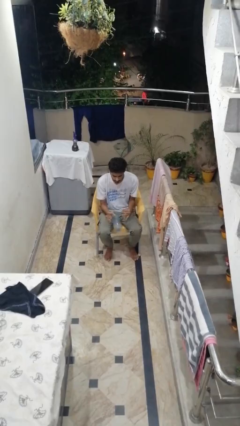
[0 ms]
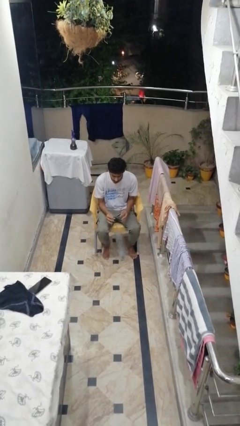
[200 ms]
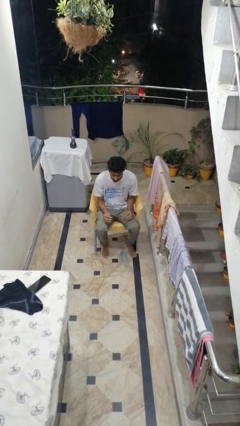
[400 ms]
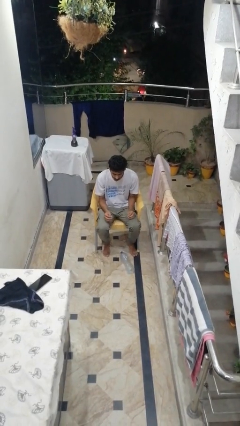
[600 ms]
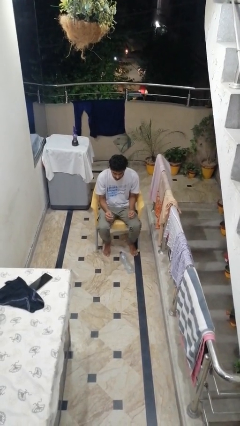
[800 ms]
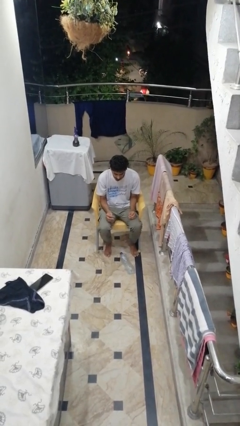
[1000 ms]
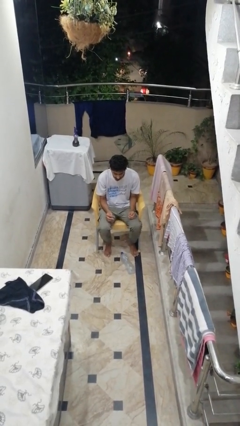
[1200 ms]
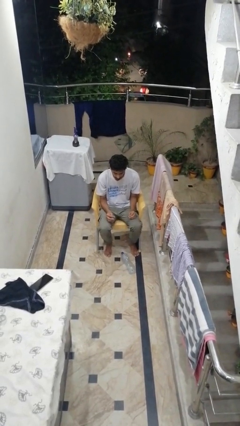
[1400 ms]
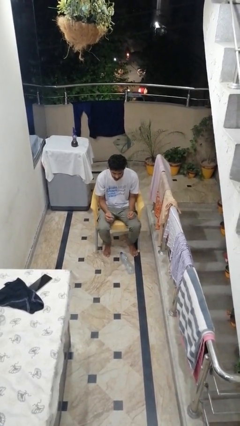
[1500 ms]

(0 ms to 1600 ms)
person drops object

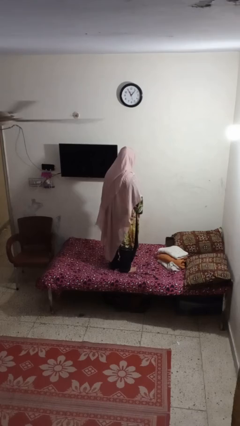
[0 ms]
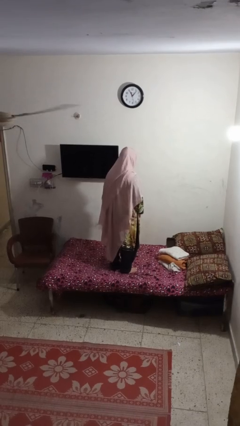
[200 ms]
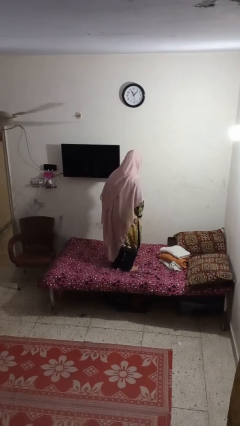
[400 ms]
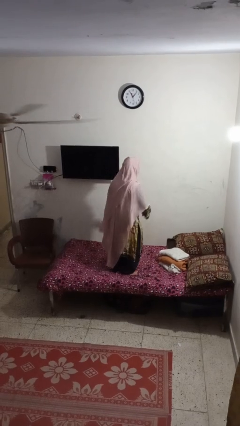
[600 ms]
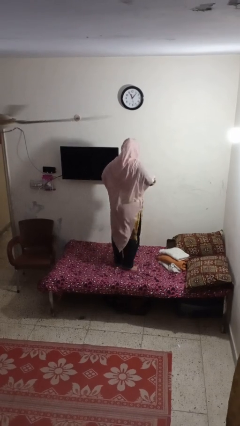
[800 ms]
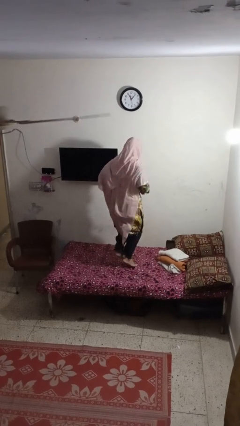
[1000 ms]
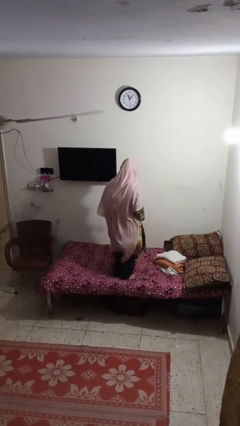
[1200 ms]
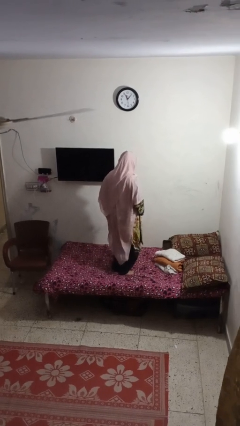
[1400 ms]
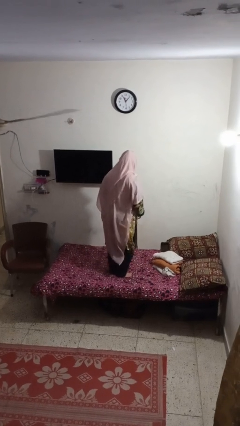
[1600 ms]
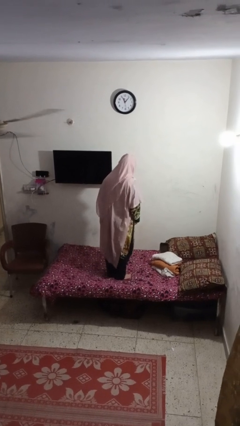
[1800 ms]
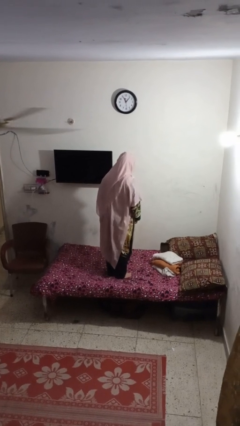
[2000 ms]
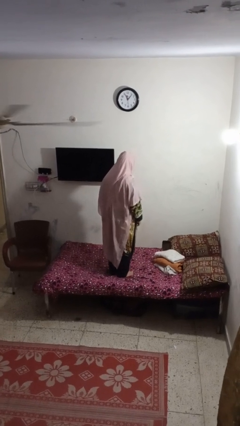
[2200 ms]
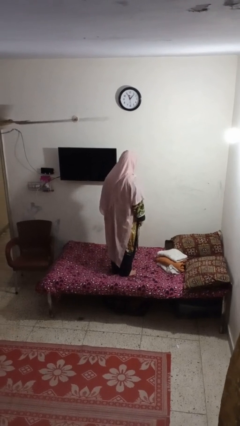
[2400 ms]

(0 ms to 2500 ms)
person jumps on bed

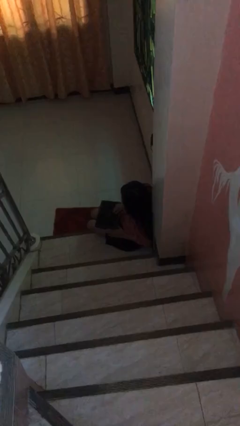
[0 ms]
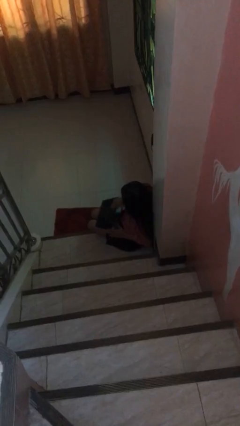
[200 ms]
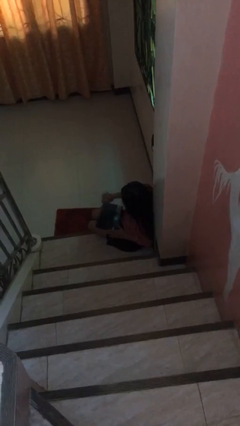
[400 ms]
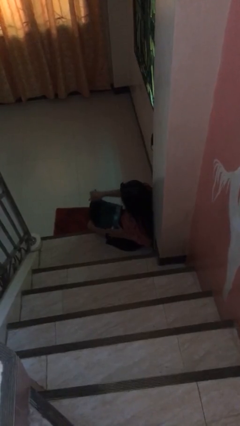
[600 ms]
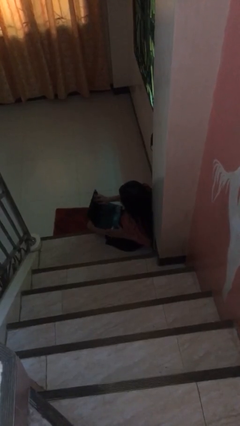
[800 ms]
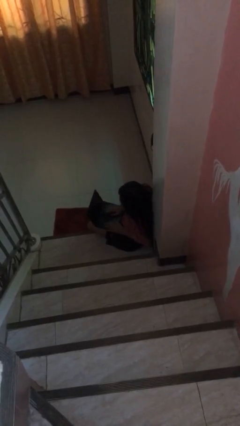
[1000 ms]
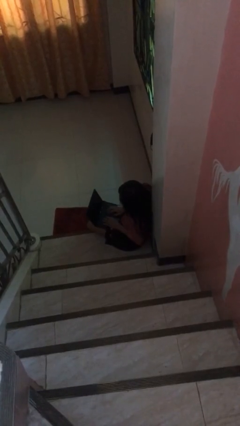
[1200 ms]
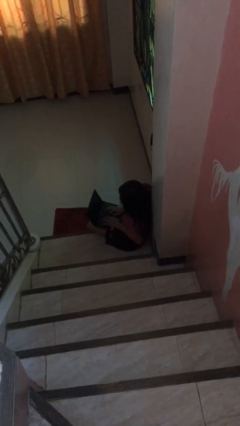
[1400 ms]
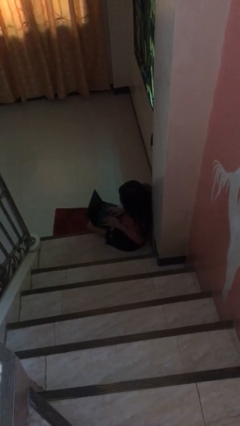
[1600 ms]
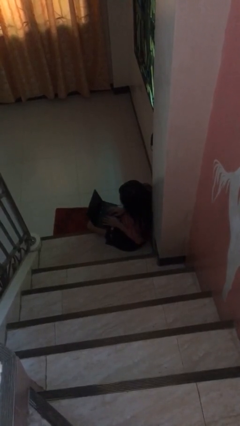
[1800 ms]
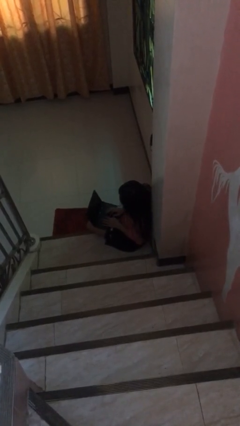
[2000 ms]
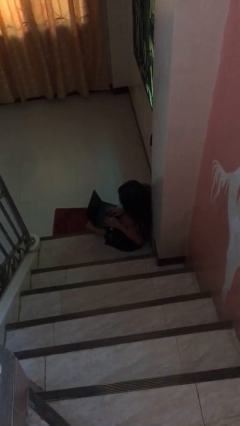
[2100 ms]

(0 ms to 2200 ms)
person interacts with laptop

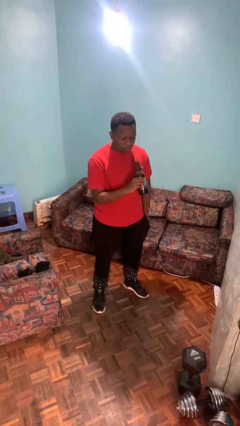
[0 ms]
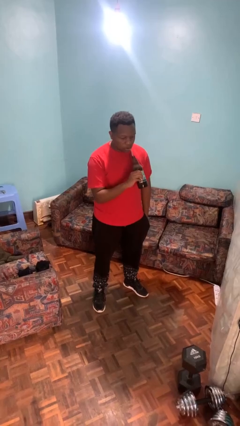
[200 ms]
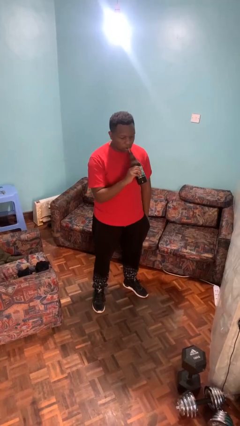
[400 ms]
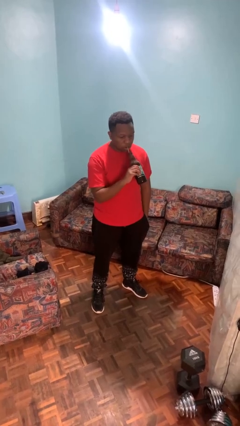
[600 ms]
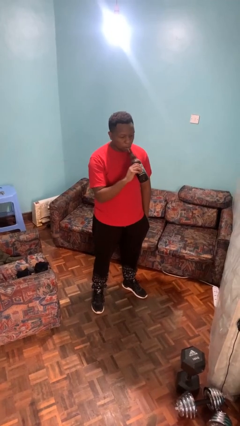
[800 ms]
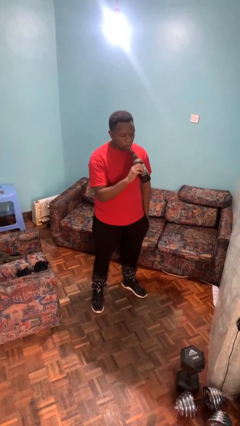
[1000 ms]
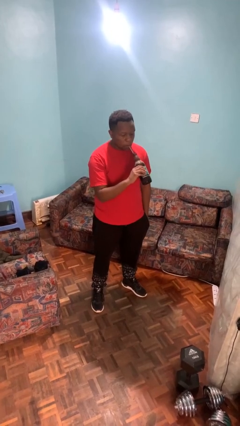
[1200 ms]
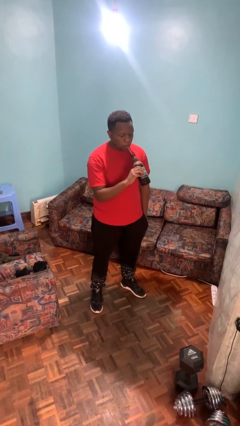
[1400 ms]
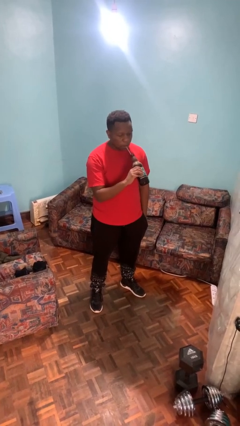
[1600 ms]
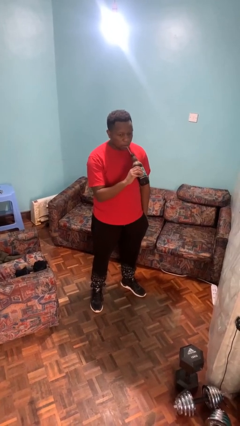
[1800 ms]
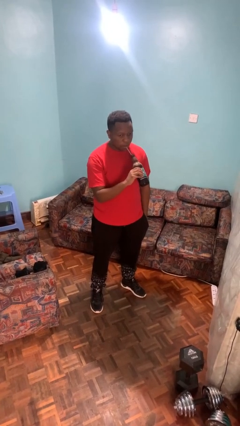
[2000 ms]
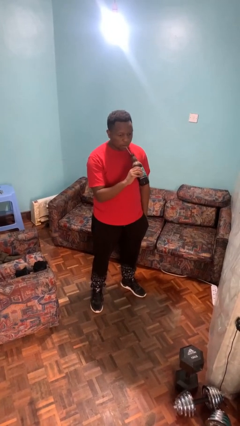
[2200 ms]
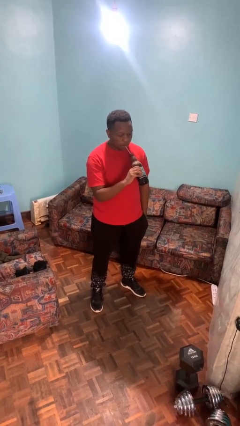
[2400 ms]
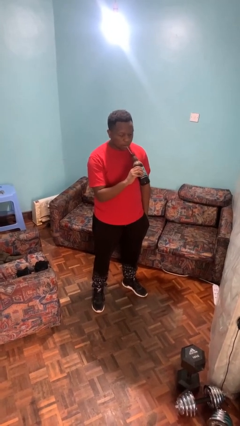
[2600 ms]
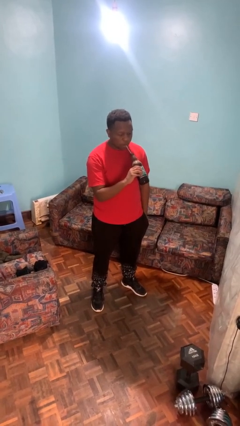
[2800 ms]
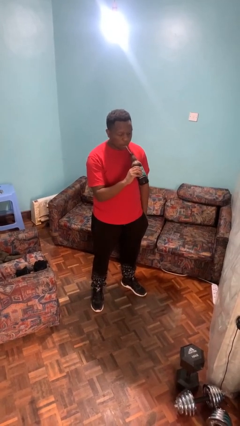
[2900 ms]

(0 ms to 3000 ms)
person drinks from straw

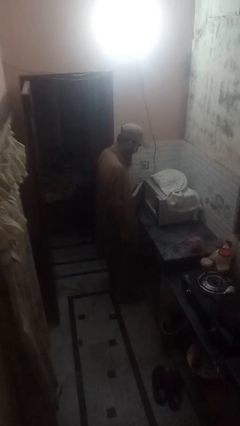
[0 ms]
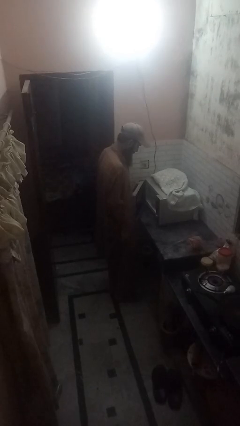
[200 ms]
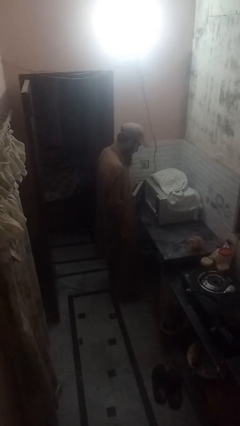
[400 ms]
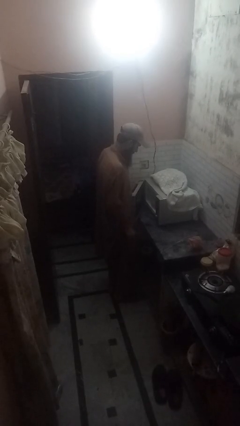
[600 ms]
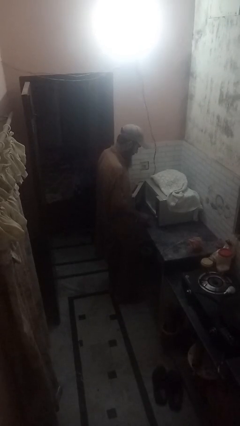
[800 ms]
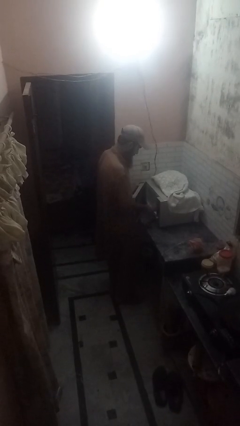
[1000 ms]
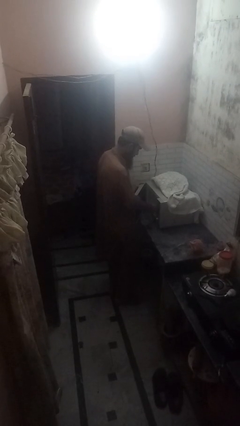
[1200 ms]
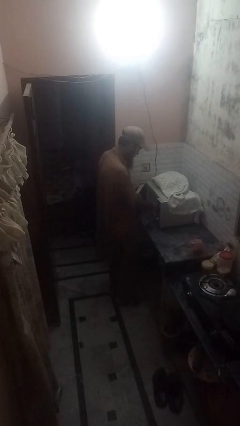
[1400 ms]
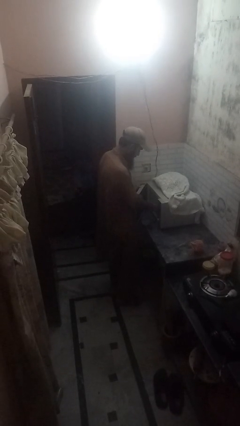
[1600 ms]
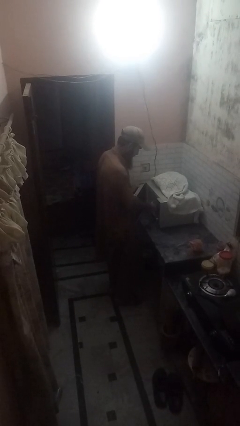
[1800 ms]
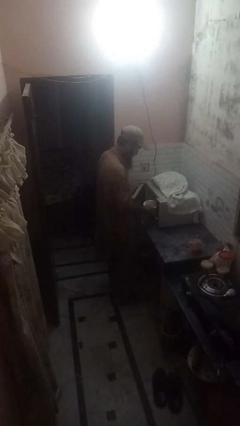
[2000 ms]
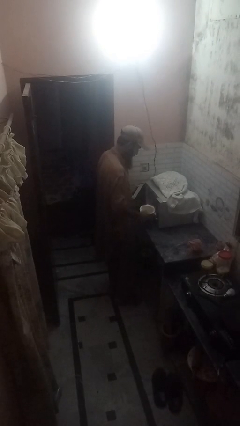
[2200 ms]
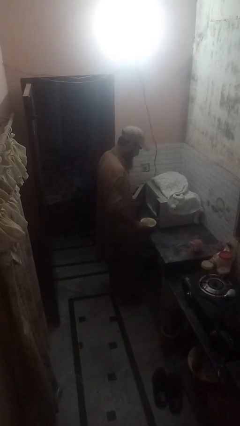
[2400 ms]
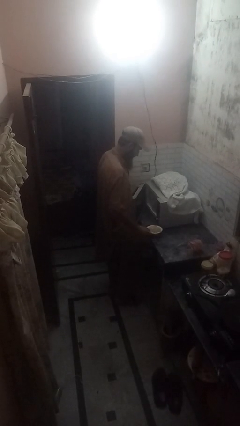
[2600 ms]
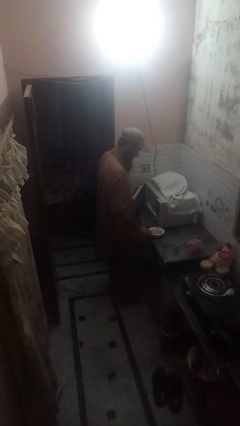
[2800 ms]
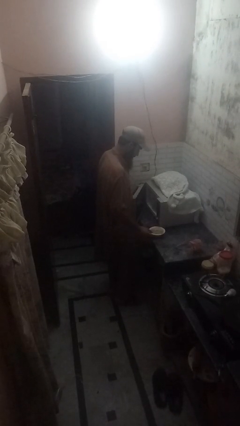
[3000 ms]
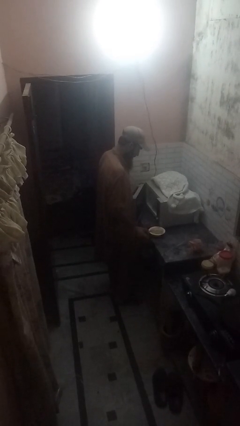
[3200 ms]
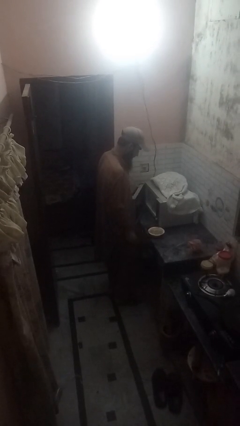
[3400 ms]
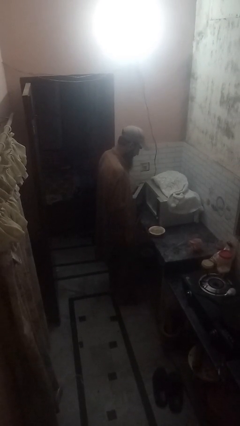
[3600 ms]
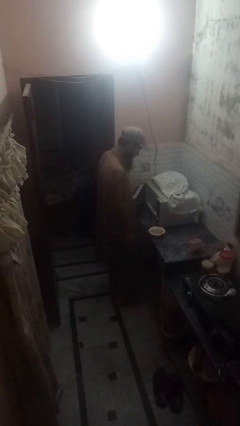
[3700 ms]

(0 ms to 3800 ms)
person takes object from microwave

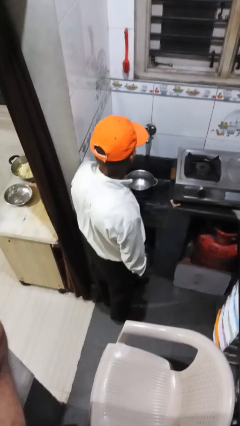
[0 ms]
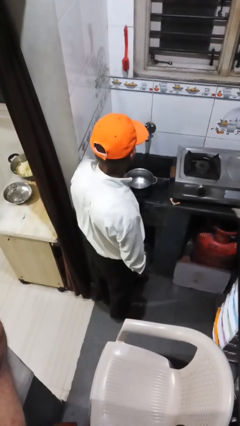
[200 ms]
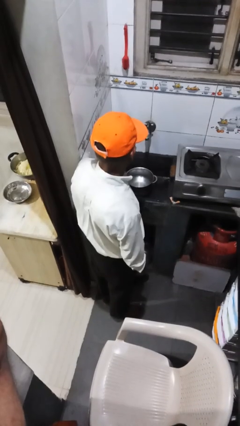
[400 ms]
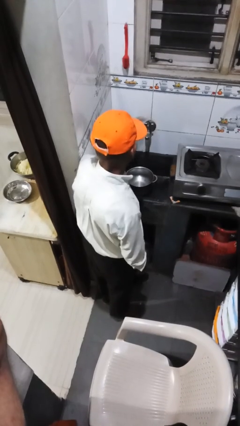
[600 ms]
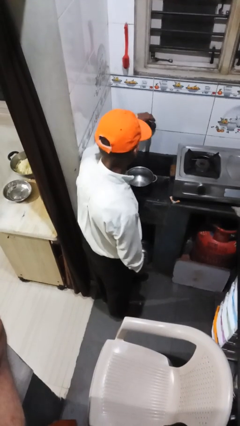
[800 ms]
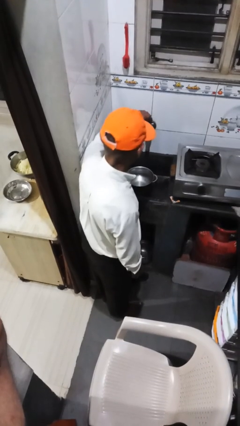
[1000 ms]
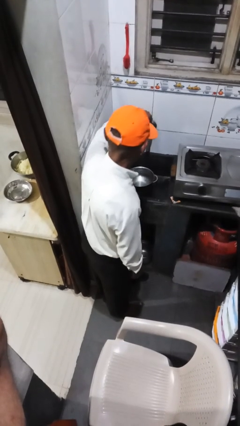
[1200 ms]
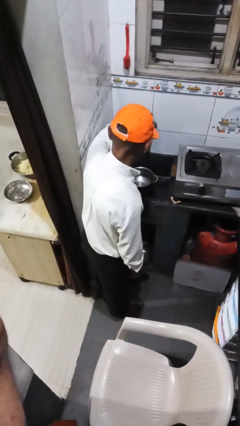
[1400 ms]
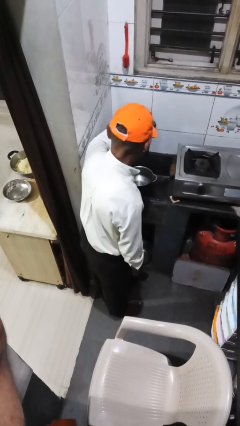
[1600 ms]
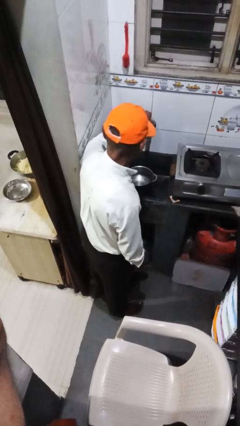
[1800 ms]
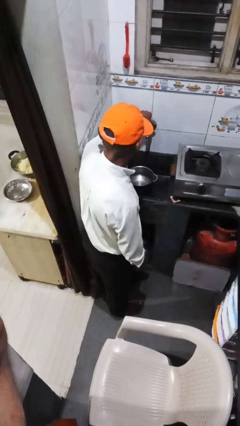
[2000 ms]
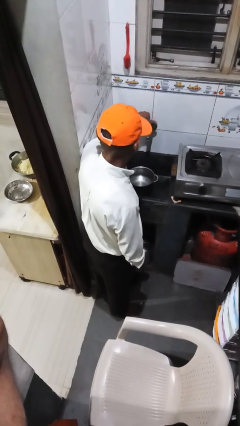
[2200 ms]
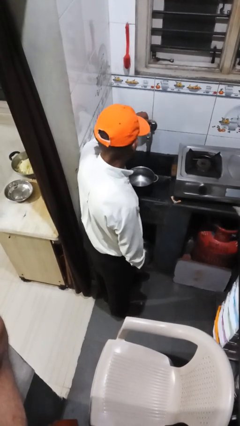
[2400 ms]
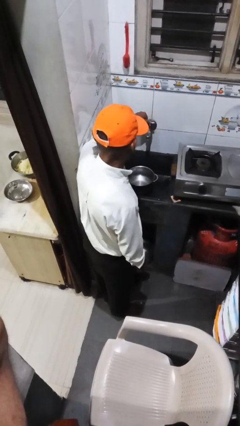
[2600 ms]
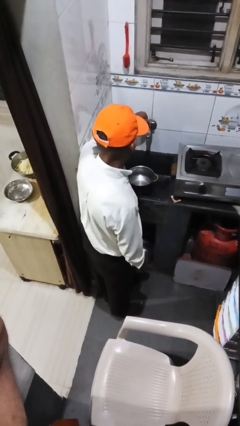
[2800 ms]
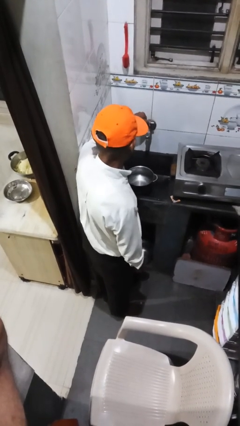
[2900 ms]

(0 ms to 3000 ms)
person turns on faucet

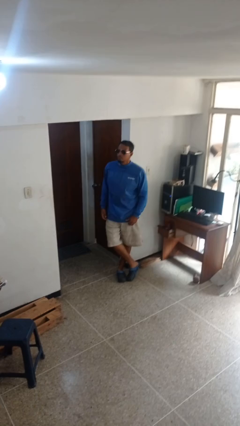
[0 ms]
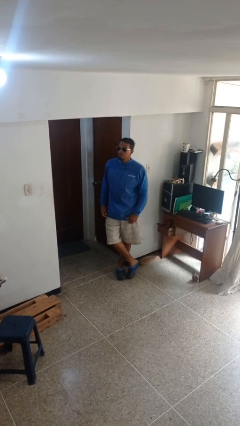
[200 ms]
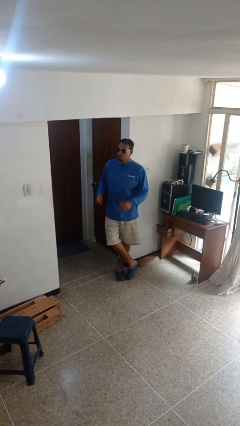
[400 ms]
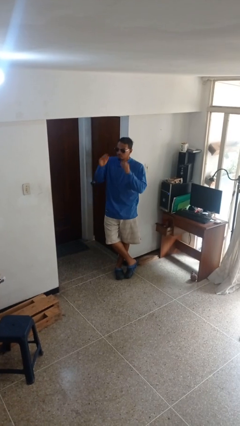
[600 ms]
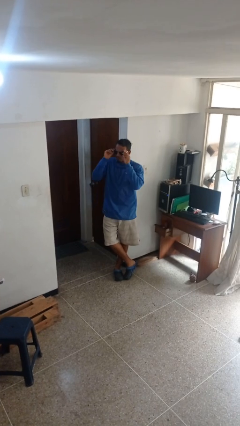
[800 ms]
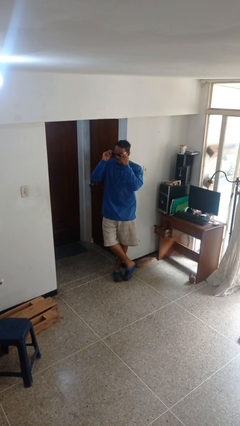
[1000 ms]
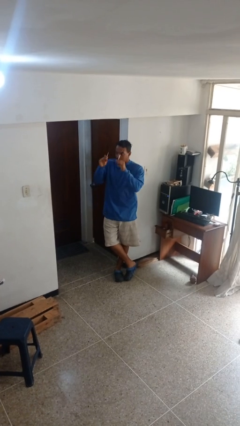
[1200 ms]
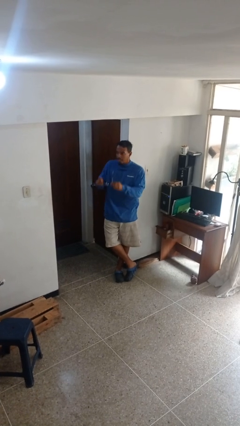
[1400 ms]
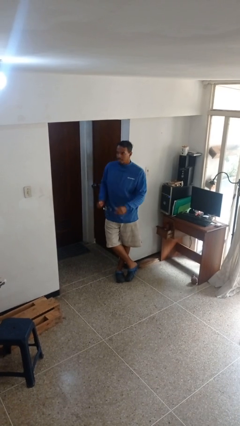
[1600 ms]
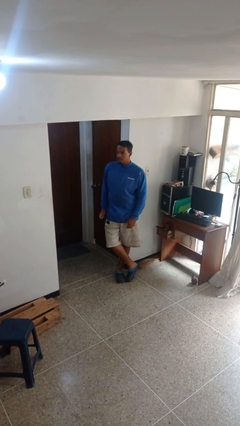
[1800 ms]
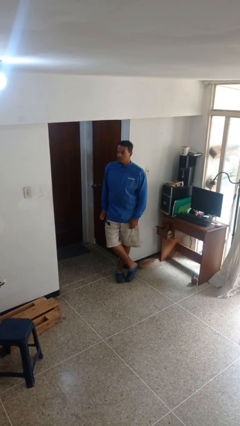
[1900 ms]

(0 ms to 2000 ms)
person takes off sunglasses
